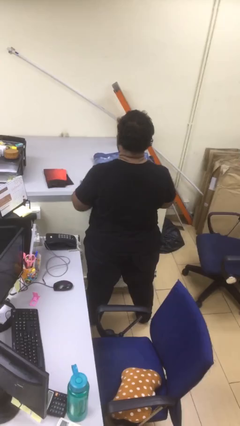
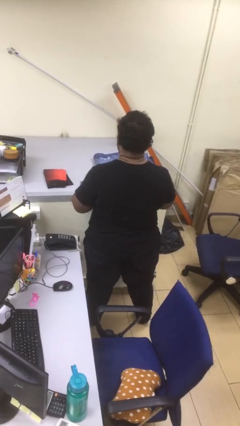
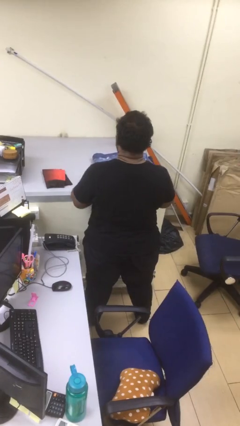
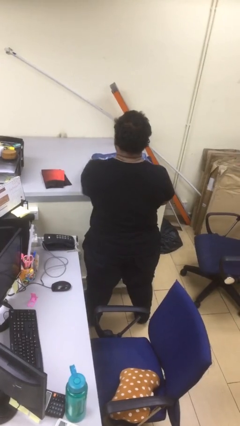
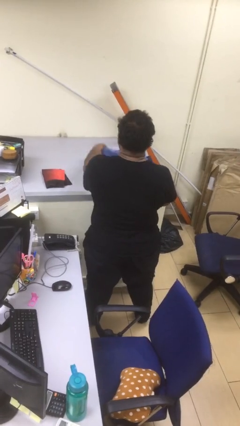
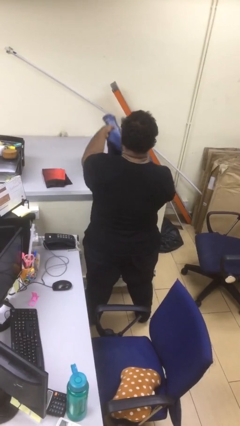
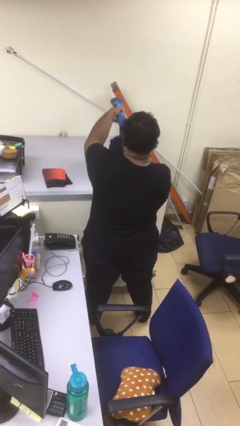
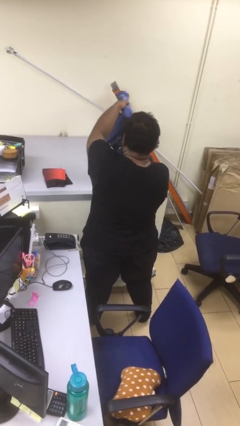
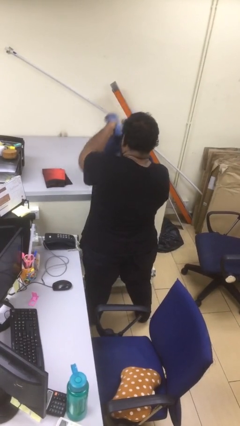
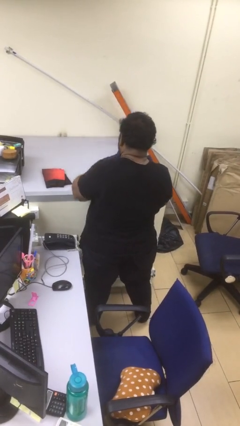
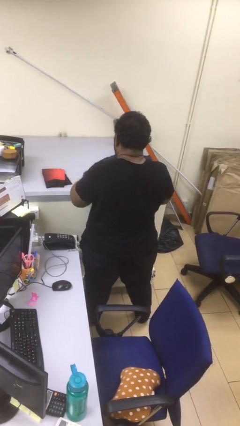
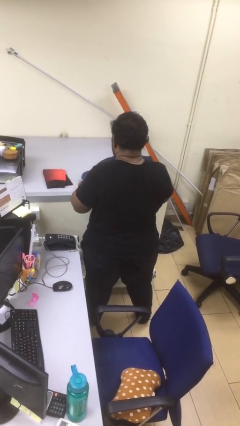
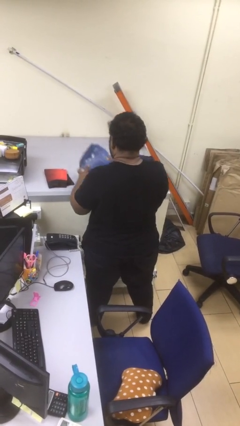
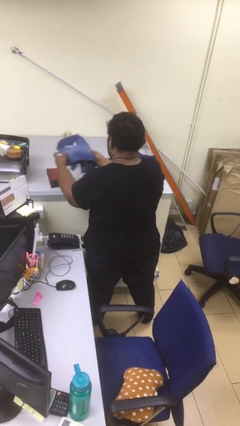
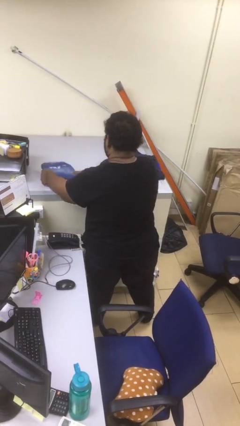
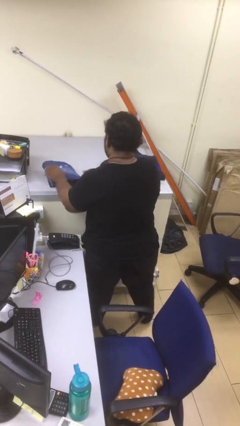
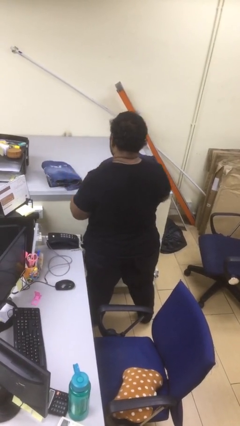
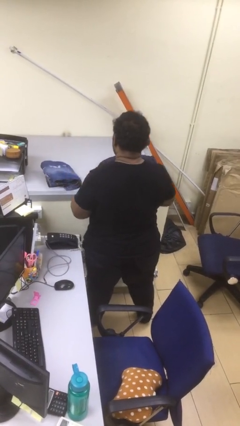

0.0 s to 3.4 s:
person folds pants

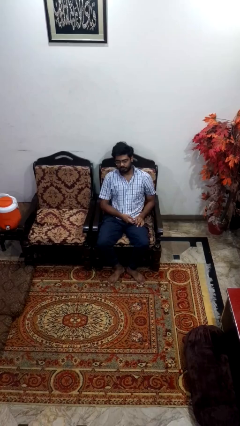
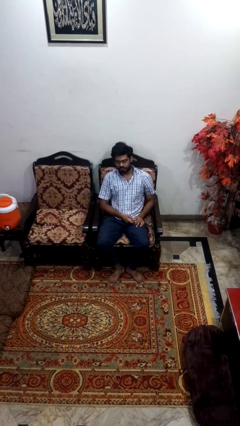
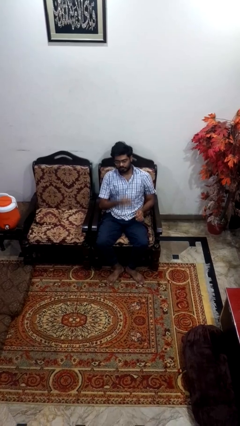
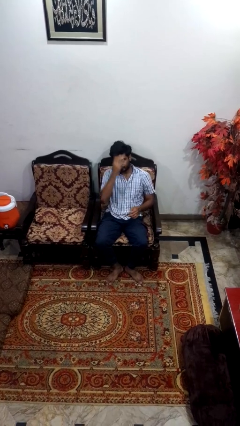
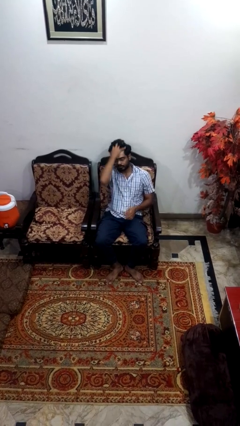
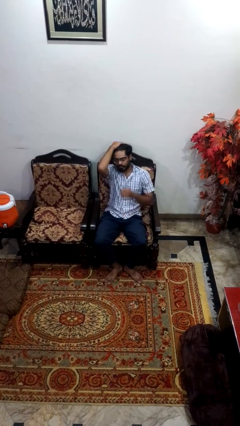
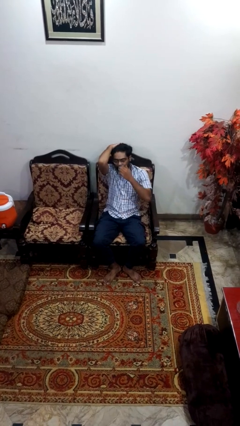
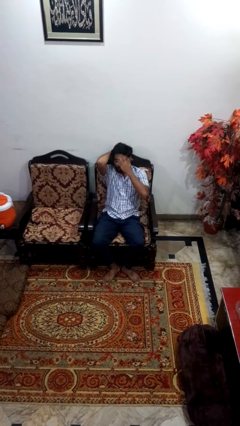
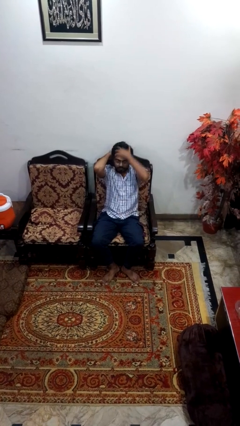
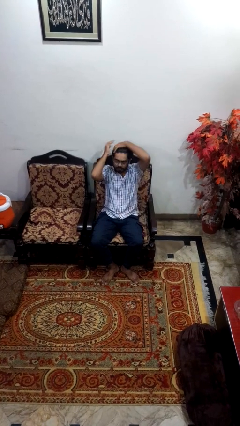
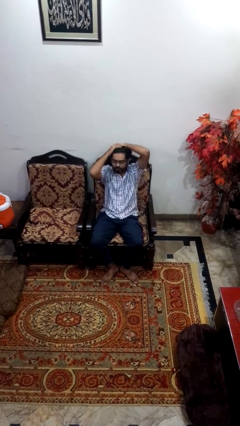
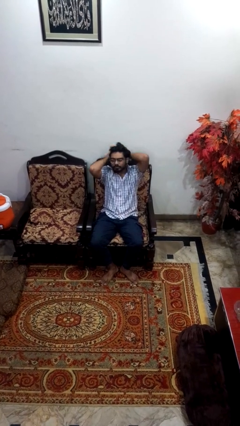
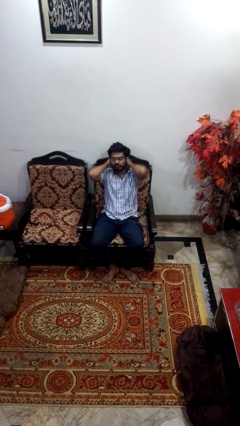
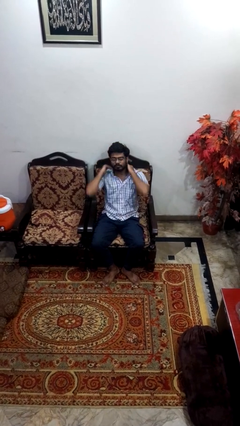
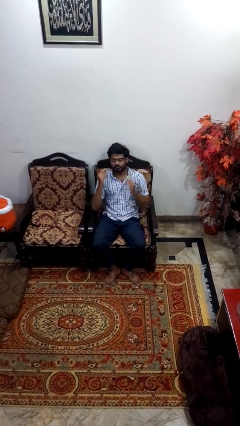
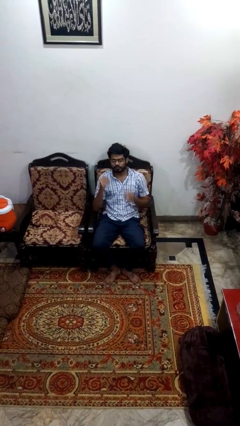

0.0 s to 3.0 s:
person strokes hair

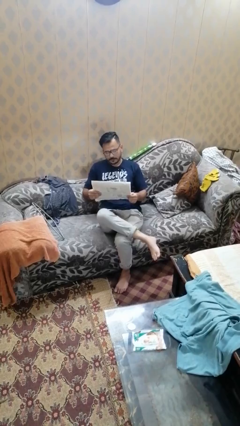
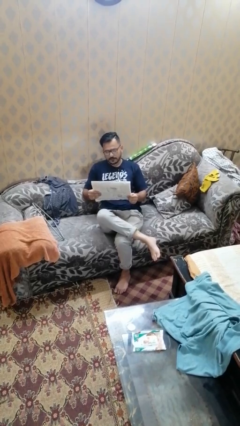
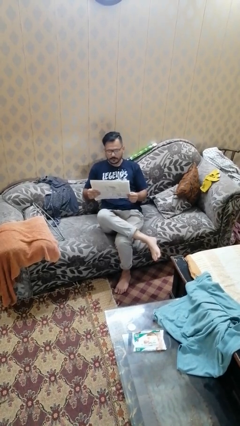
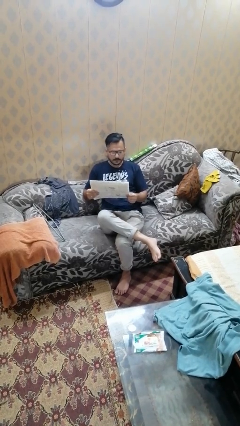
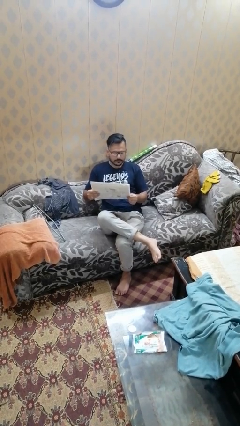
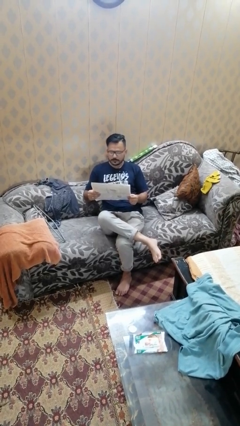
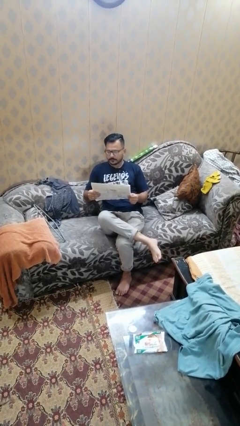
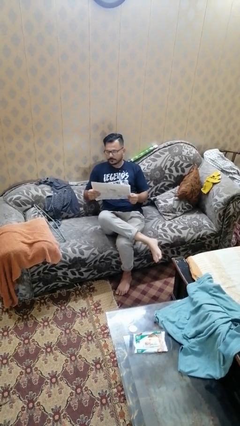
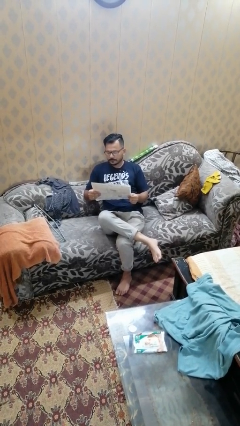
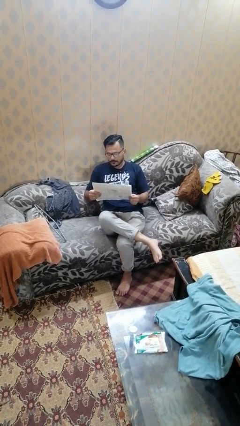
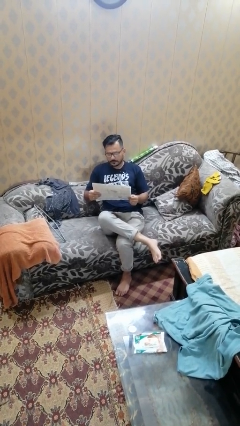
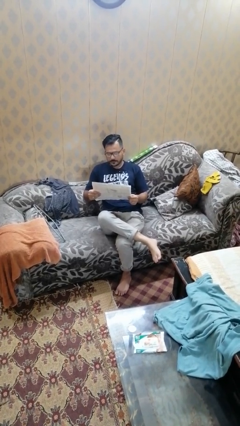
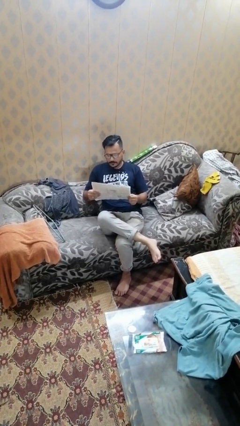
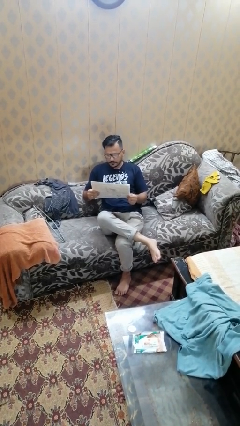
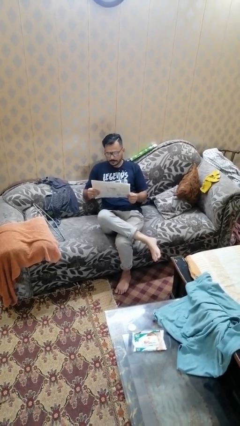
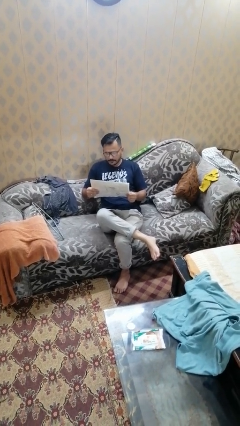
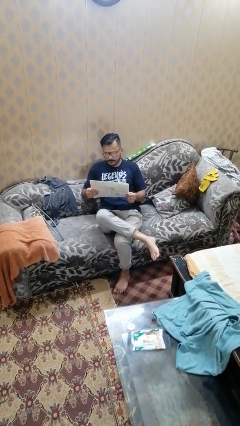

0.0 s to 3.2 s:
person reads newspaper

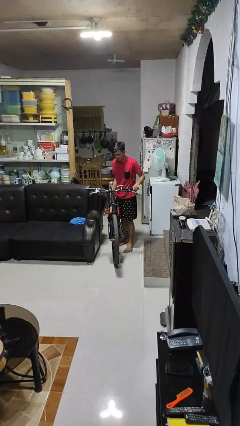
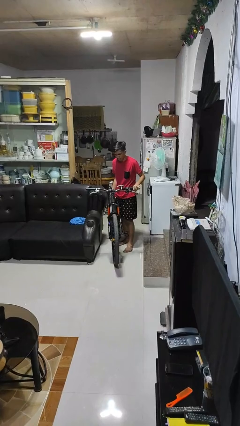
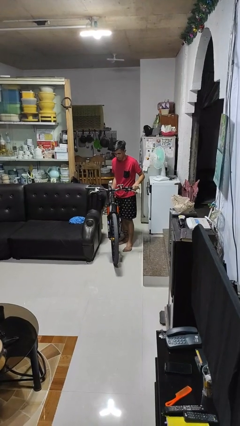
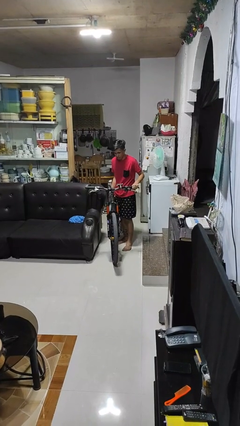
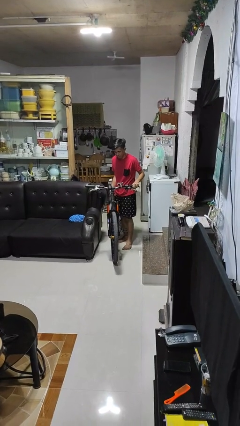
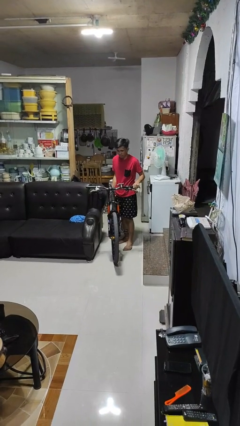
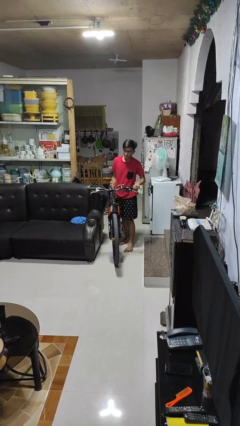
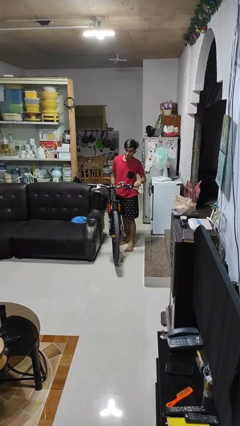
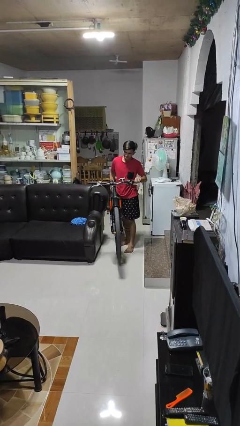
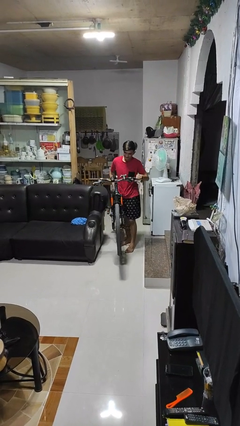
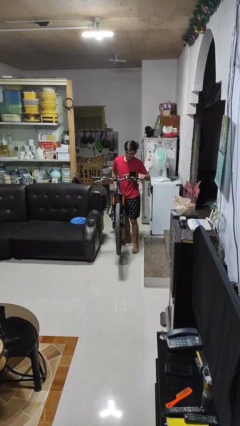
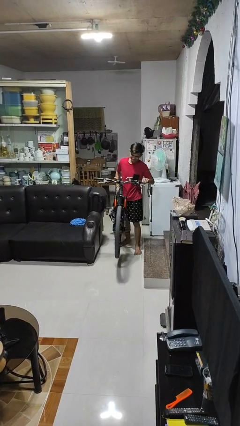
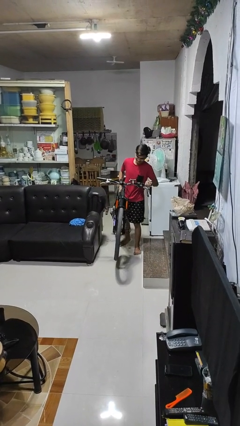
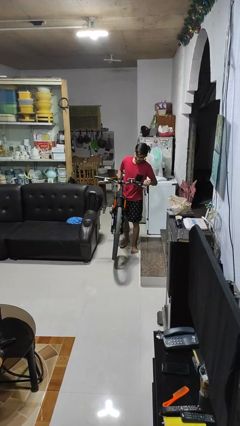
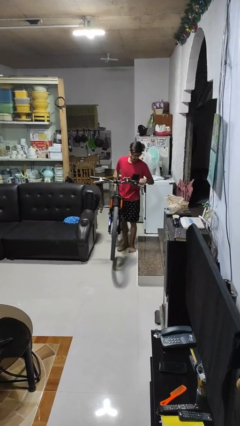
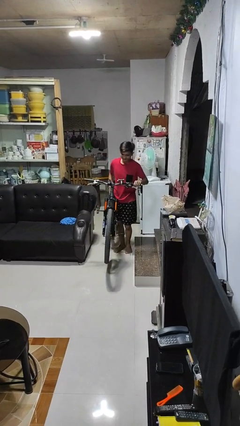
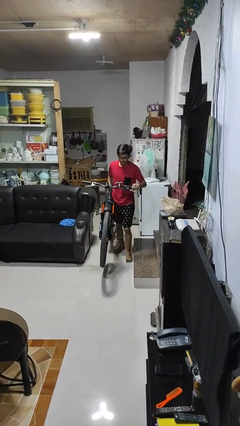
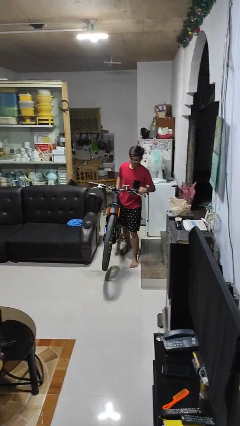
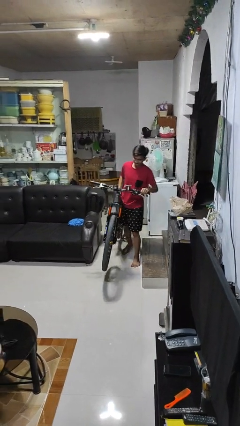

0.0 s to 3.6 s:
person carries bicycle

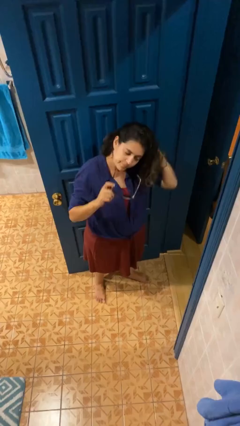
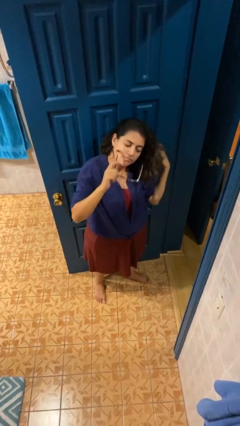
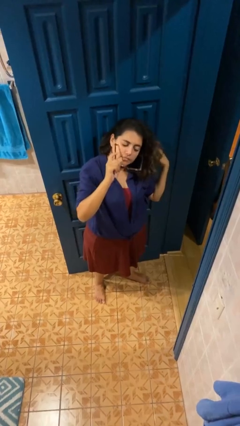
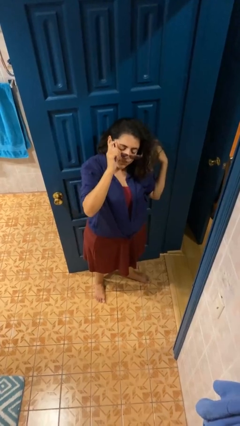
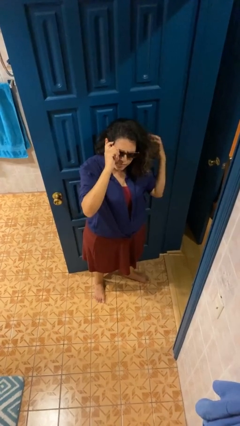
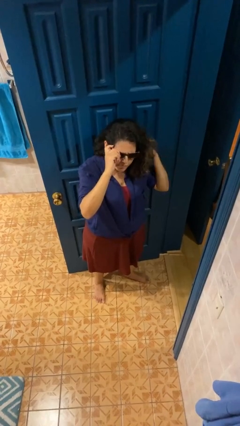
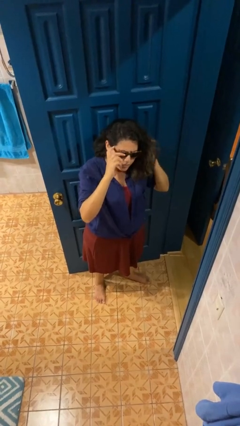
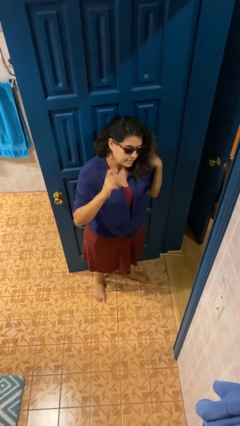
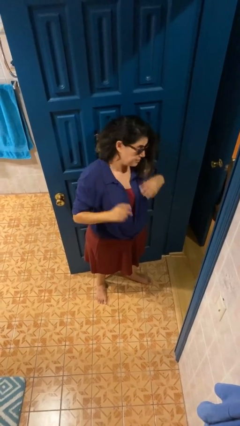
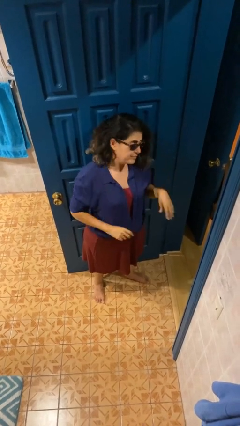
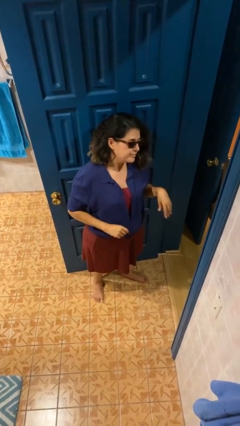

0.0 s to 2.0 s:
person puts on sunglasses

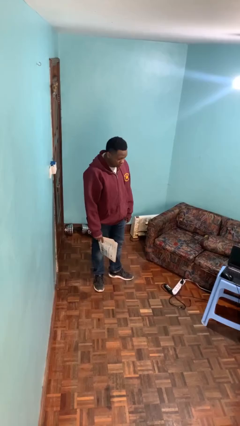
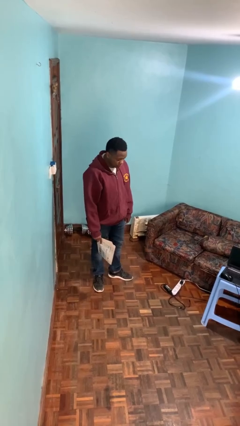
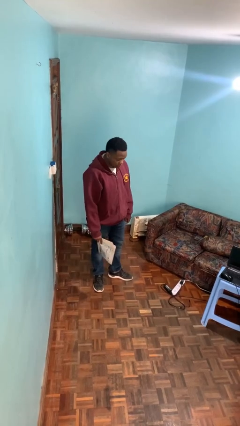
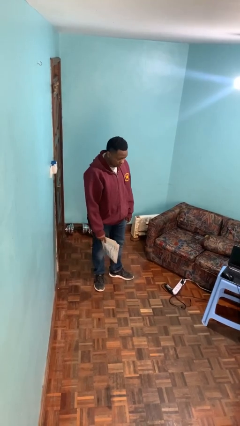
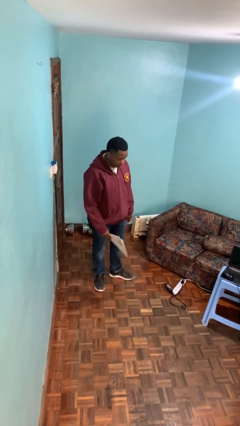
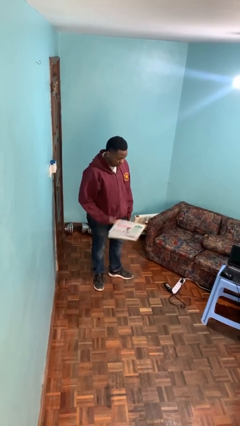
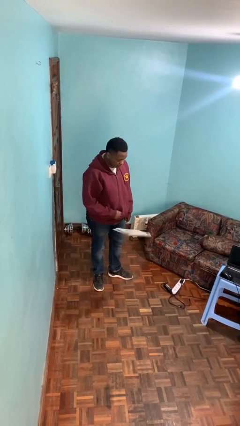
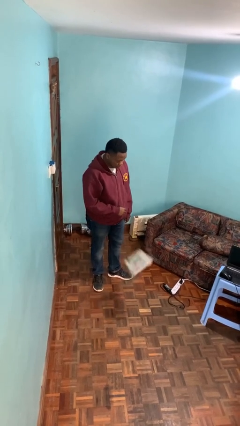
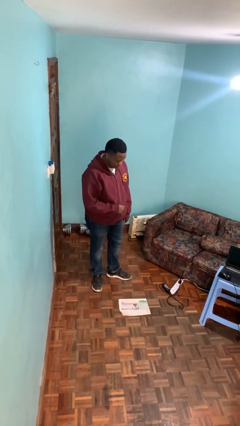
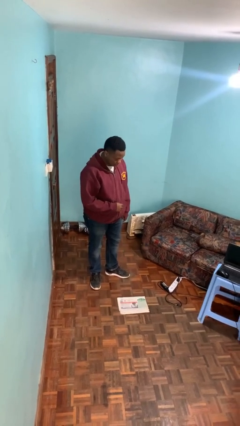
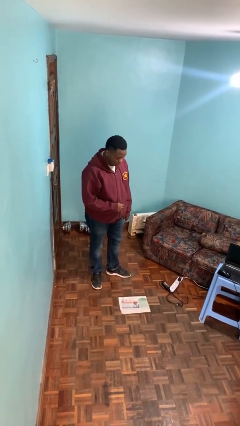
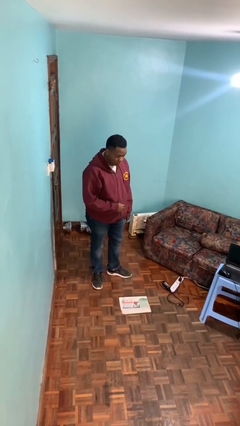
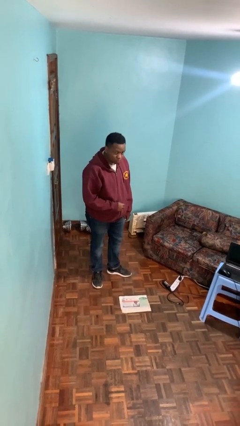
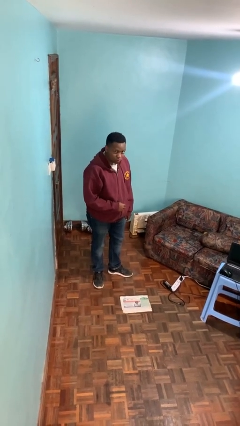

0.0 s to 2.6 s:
person drops object
